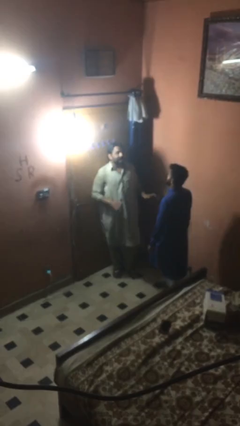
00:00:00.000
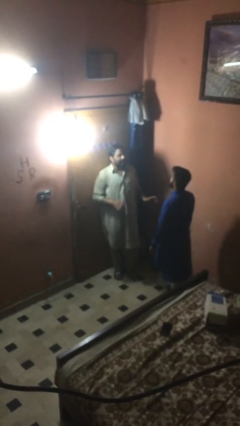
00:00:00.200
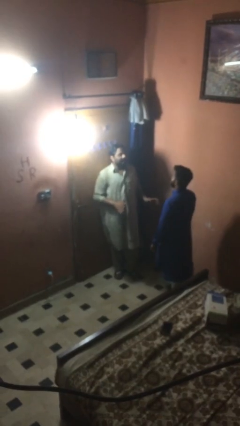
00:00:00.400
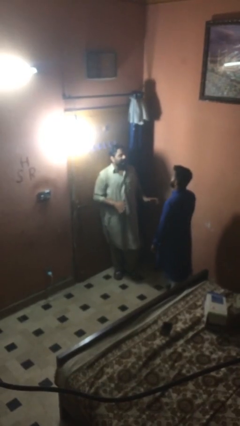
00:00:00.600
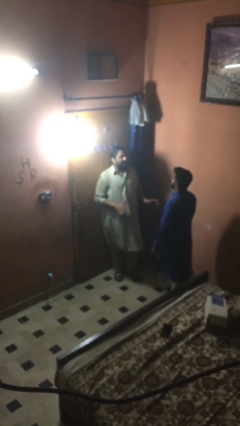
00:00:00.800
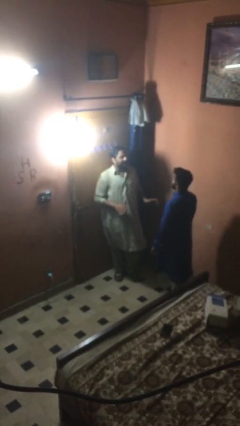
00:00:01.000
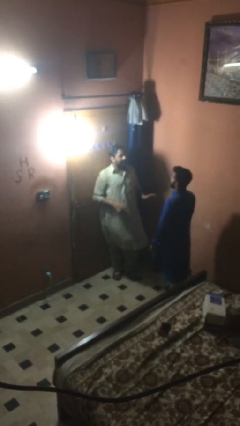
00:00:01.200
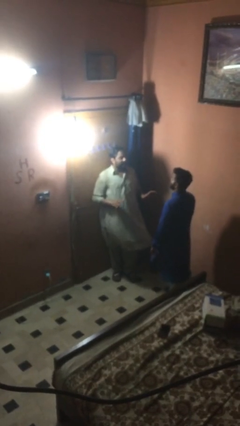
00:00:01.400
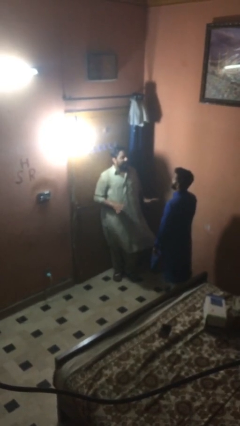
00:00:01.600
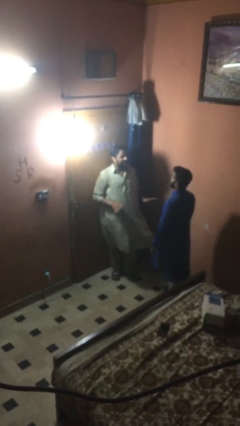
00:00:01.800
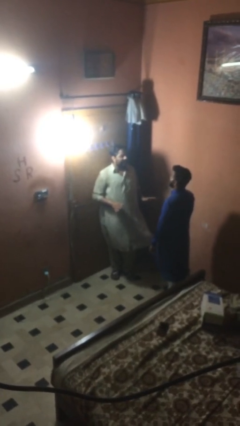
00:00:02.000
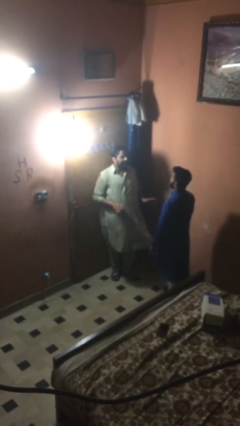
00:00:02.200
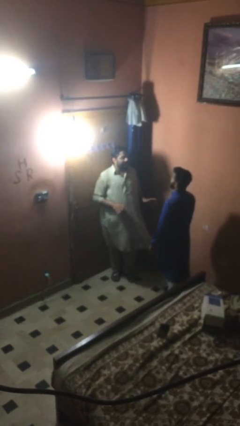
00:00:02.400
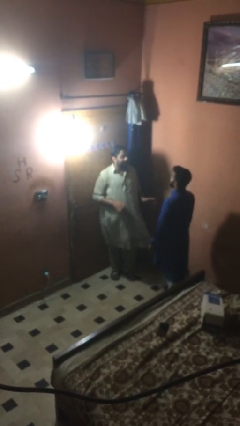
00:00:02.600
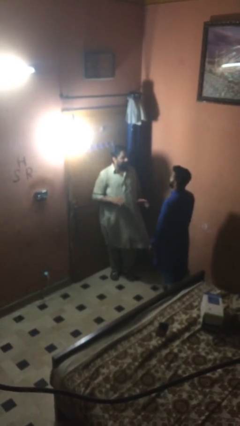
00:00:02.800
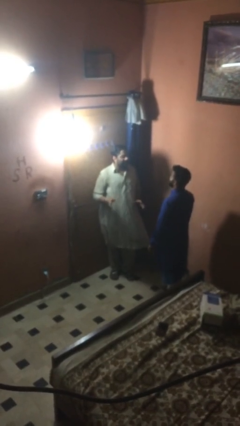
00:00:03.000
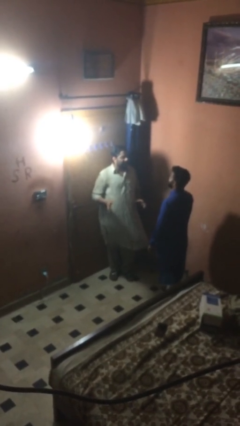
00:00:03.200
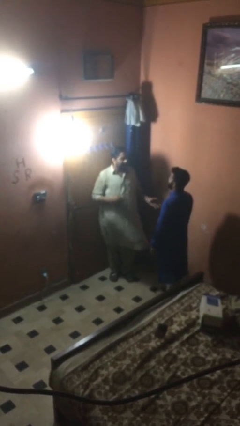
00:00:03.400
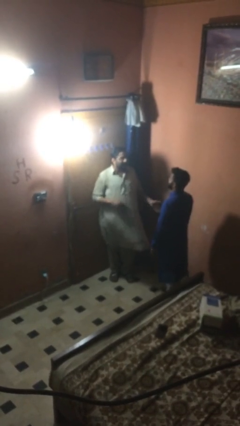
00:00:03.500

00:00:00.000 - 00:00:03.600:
person talks to person

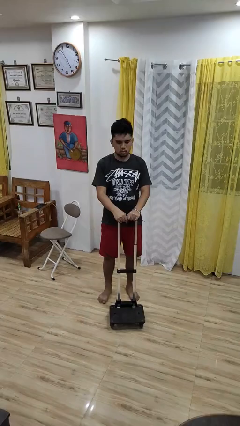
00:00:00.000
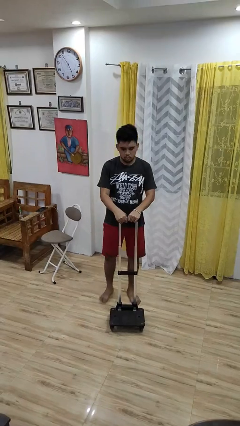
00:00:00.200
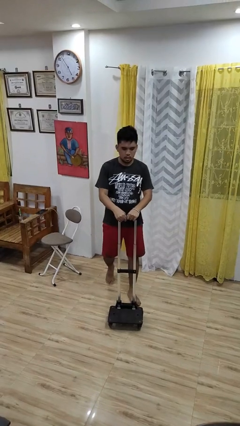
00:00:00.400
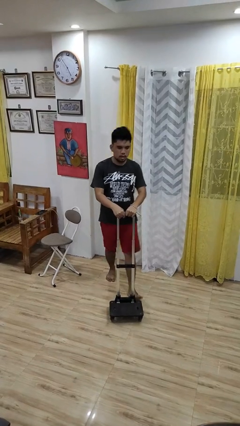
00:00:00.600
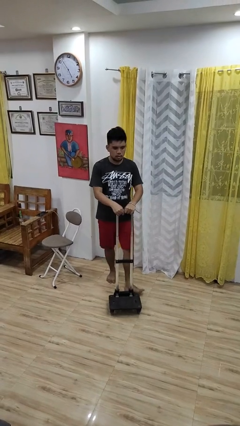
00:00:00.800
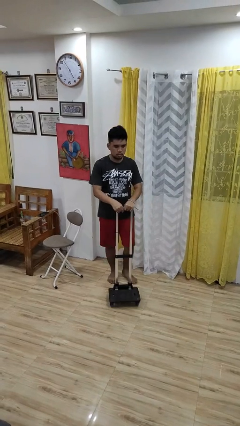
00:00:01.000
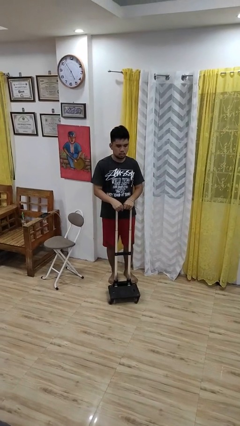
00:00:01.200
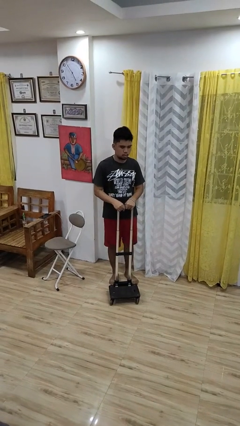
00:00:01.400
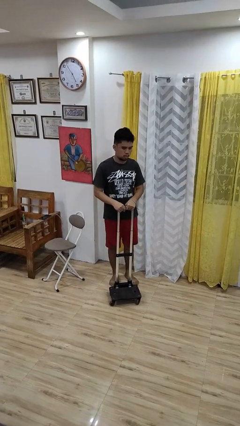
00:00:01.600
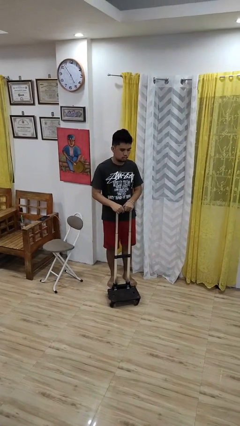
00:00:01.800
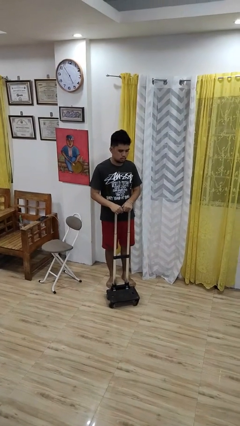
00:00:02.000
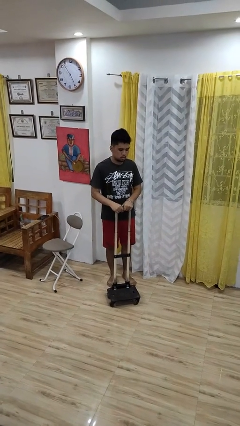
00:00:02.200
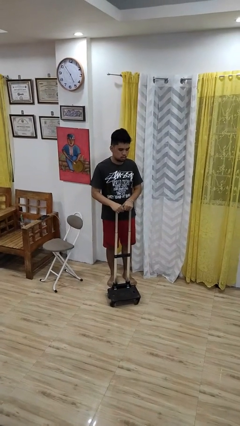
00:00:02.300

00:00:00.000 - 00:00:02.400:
person pulls wheeled cart

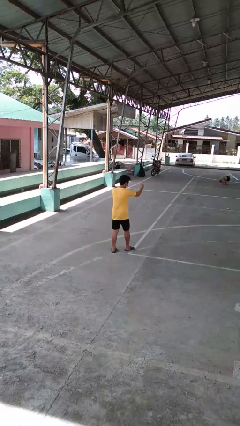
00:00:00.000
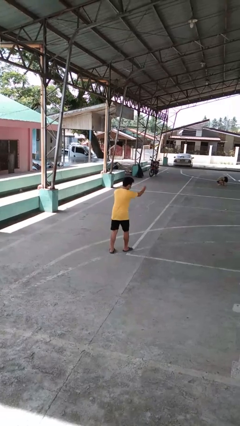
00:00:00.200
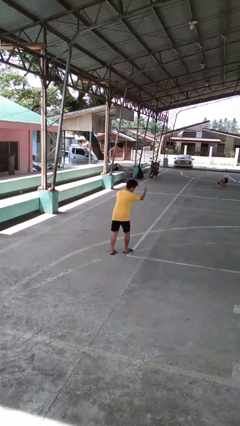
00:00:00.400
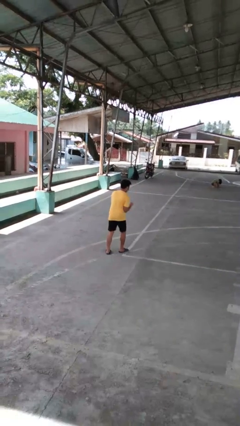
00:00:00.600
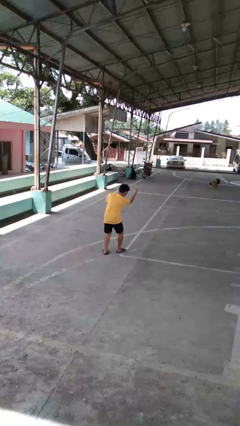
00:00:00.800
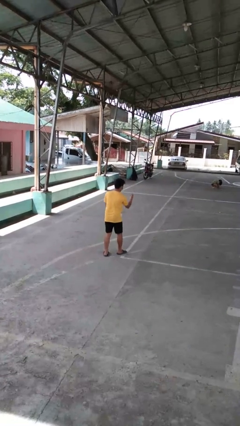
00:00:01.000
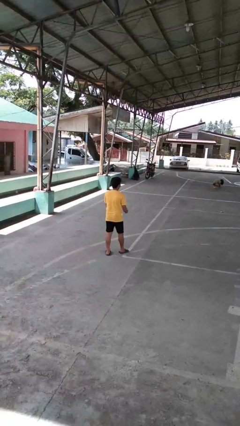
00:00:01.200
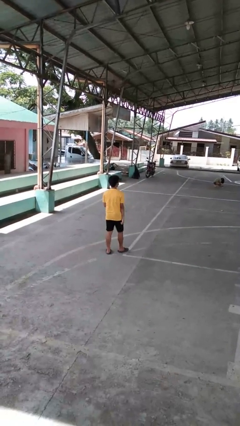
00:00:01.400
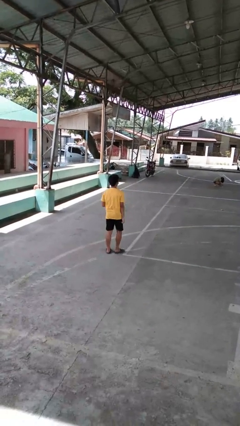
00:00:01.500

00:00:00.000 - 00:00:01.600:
person punches

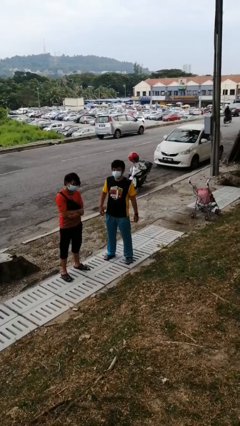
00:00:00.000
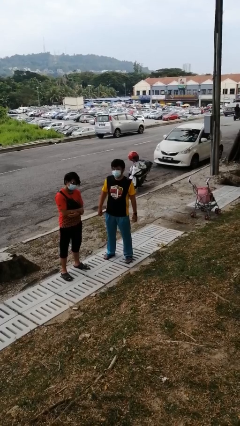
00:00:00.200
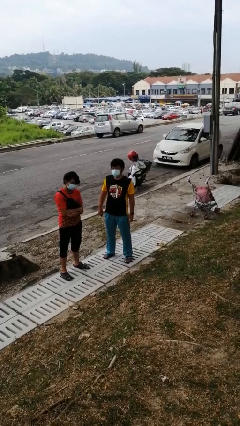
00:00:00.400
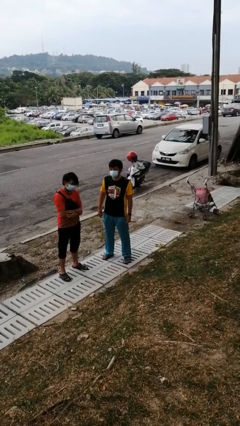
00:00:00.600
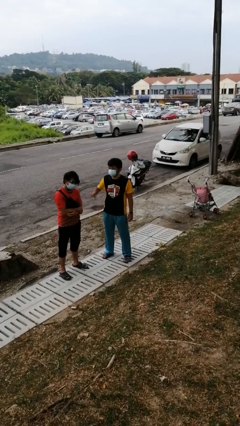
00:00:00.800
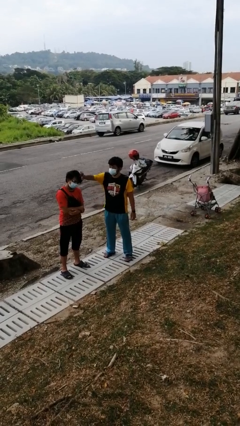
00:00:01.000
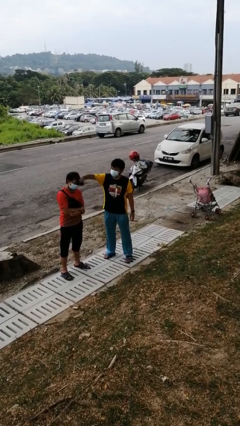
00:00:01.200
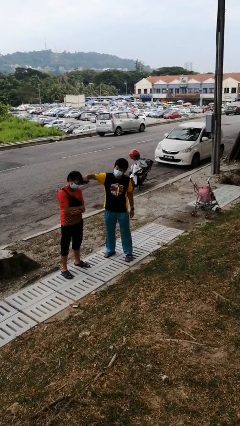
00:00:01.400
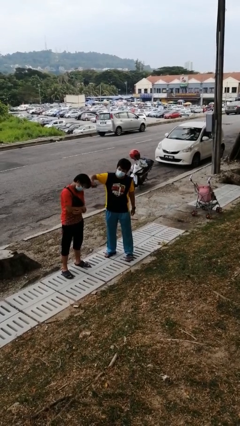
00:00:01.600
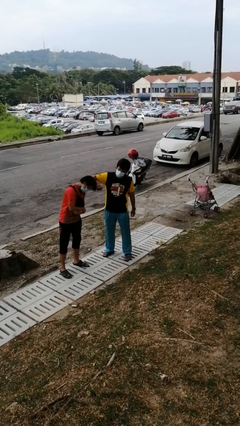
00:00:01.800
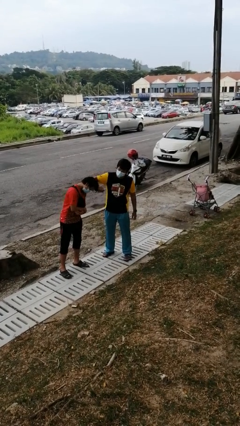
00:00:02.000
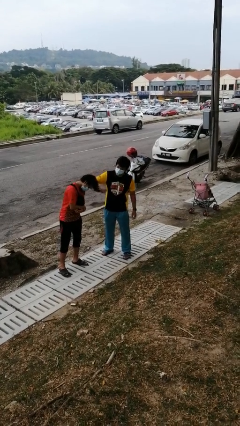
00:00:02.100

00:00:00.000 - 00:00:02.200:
person grabs person by hair

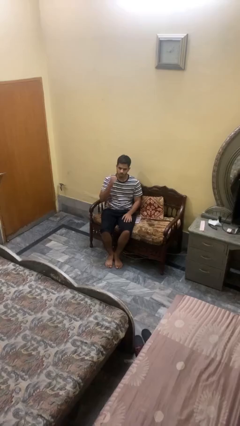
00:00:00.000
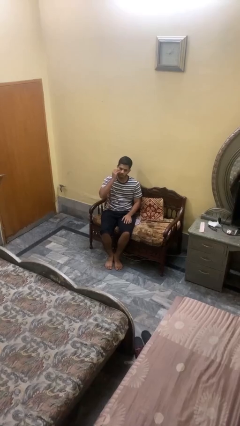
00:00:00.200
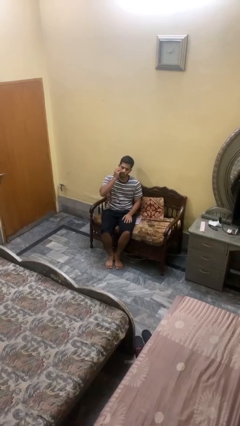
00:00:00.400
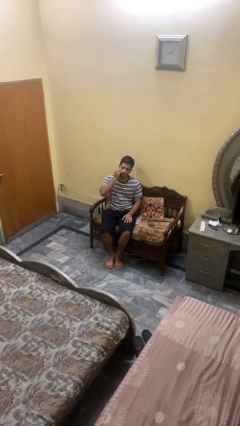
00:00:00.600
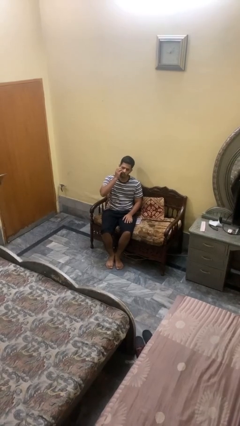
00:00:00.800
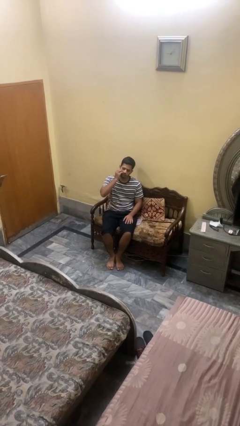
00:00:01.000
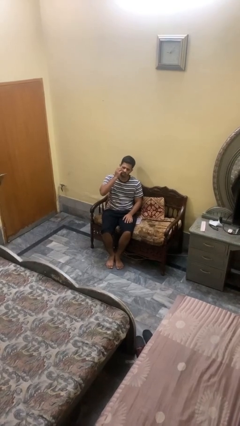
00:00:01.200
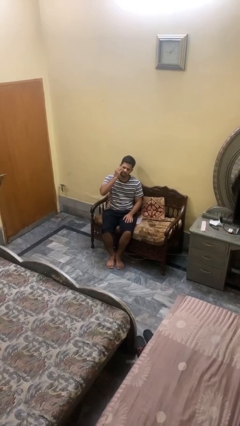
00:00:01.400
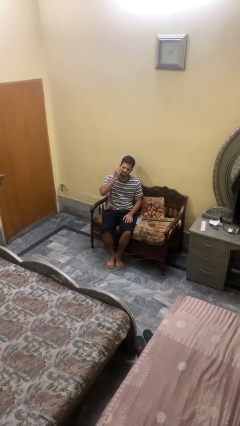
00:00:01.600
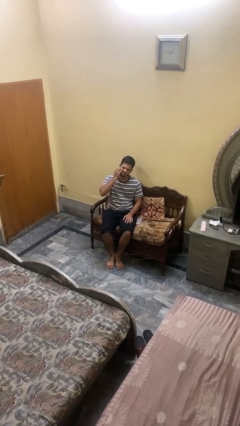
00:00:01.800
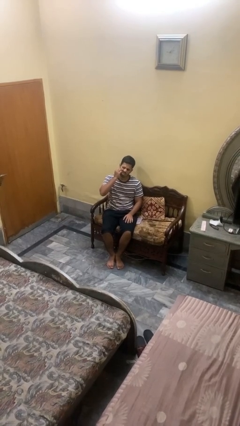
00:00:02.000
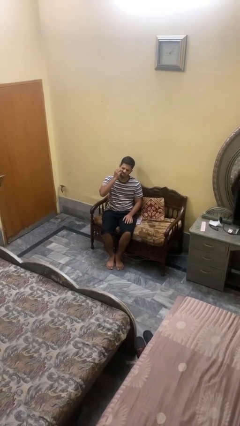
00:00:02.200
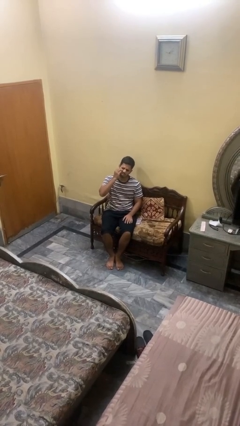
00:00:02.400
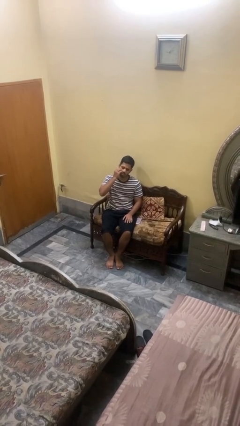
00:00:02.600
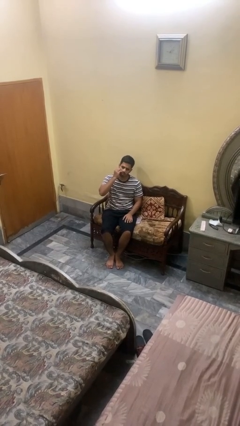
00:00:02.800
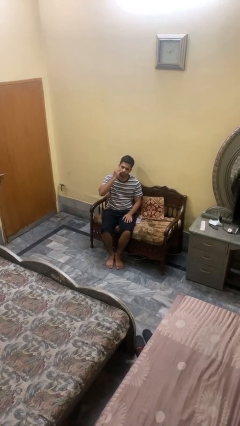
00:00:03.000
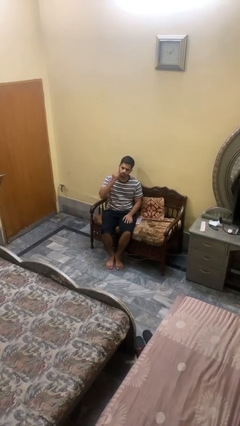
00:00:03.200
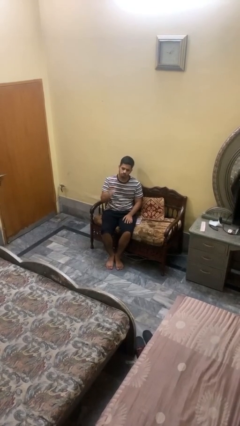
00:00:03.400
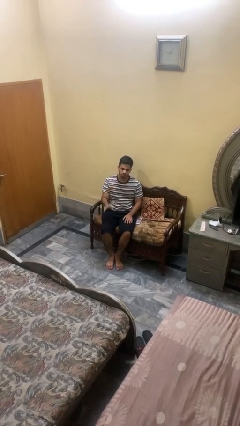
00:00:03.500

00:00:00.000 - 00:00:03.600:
person scratches face

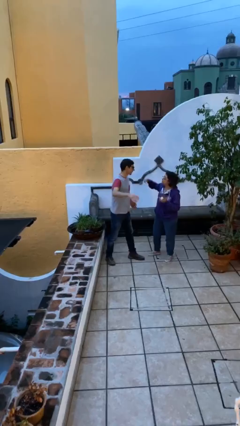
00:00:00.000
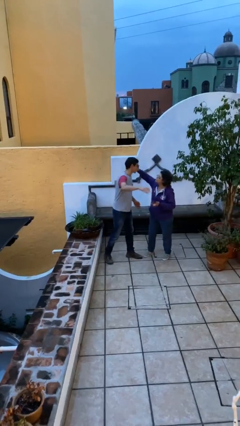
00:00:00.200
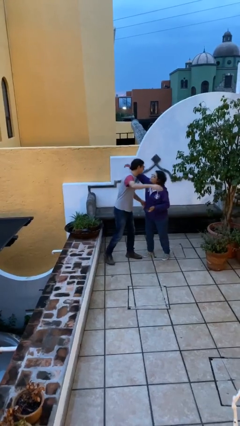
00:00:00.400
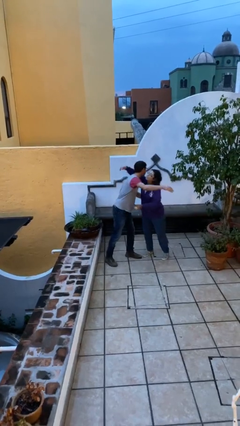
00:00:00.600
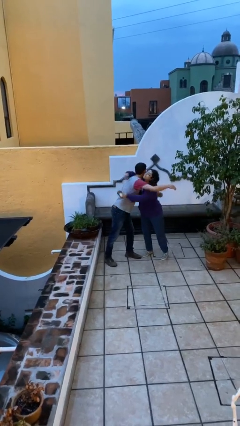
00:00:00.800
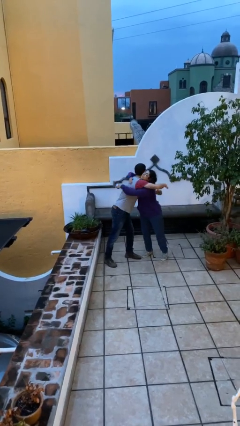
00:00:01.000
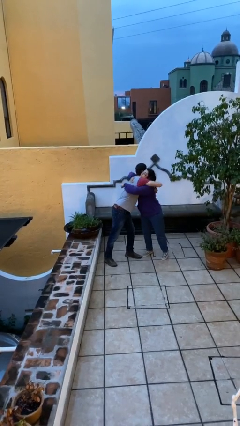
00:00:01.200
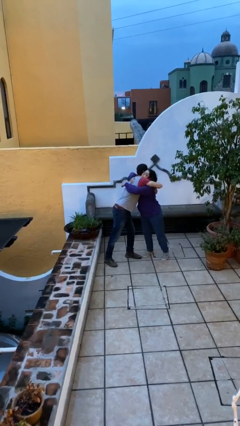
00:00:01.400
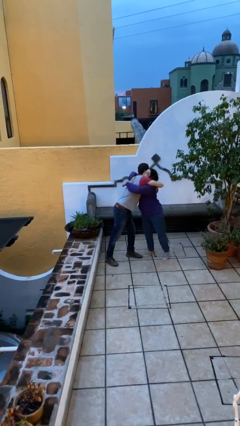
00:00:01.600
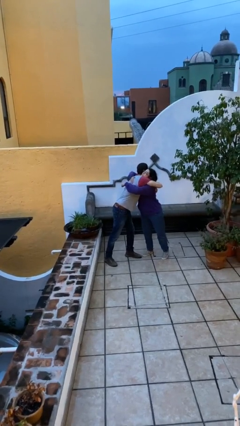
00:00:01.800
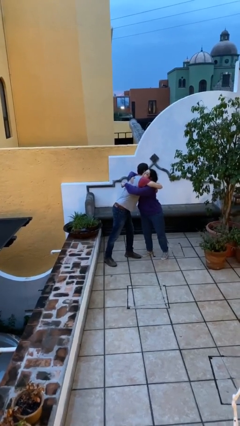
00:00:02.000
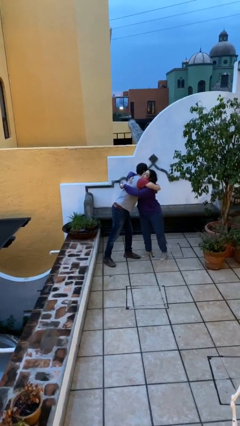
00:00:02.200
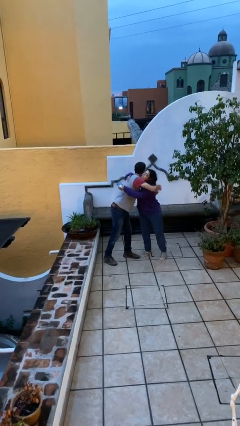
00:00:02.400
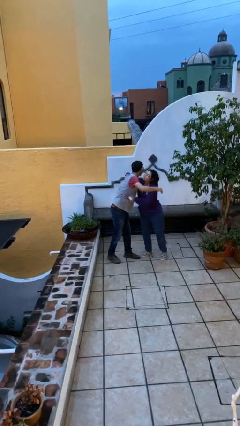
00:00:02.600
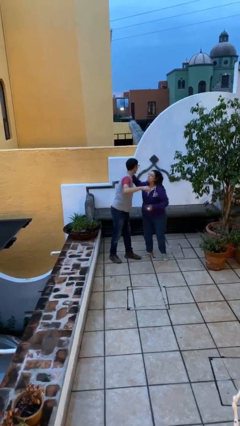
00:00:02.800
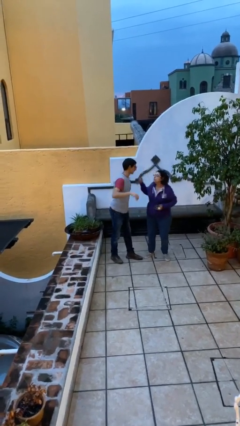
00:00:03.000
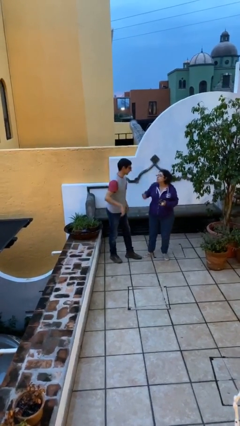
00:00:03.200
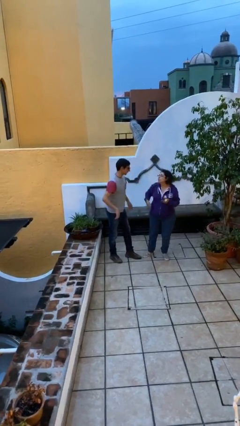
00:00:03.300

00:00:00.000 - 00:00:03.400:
person embraces person

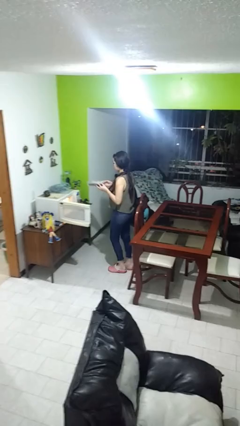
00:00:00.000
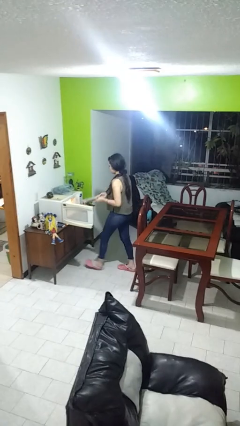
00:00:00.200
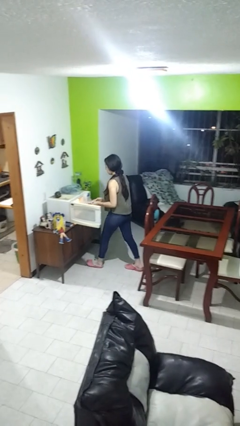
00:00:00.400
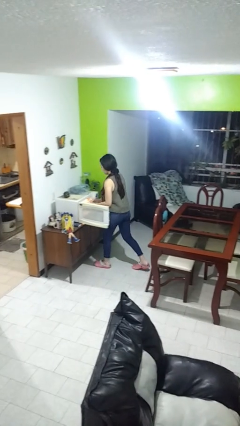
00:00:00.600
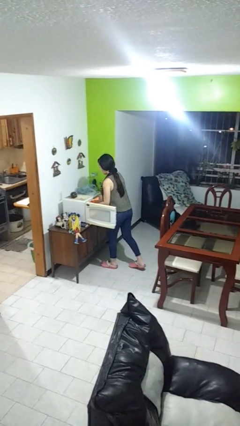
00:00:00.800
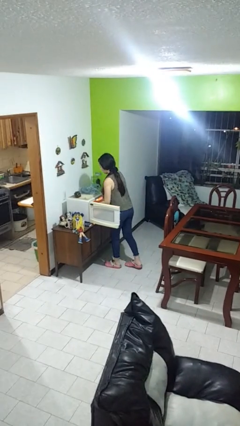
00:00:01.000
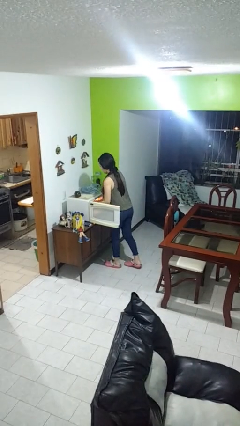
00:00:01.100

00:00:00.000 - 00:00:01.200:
person puts object into microwave
